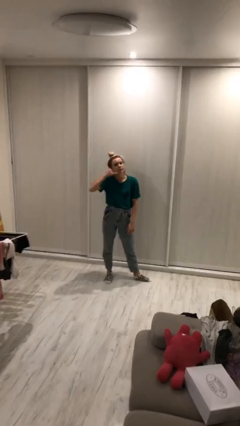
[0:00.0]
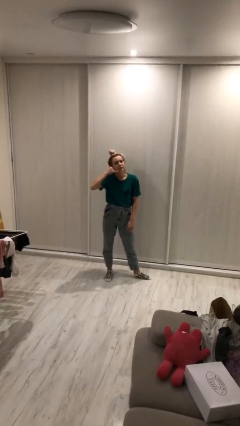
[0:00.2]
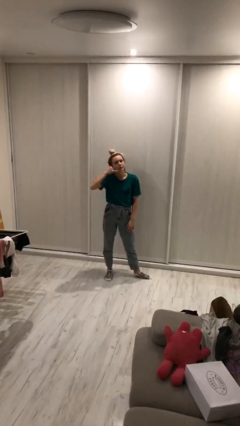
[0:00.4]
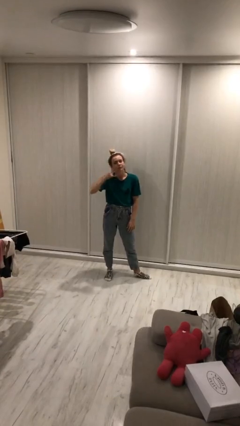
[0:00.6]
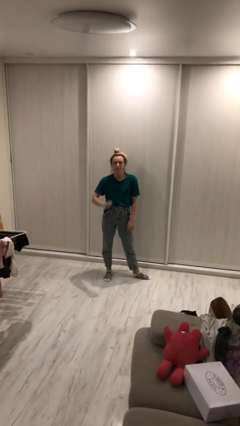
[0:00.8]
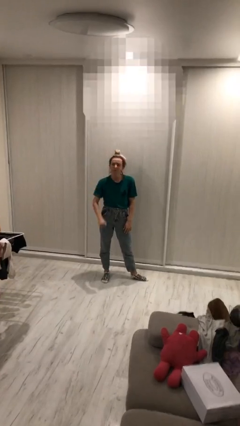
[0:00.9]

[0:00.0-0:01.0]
person gestures call me

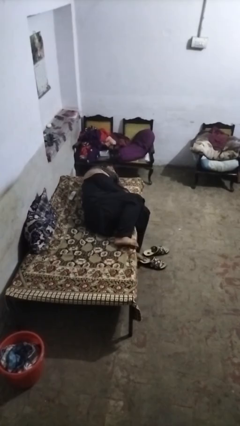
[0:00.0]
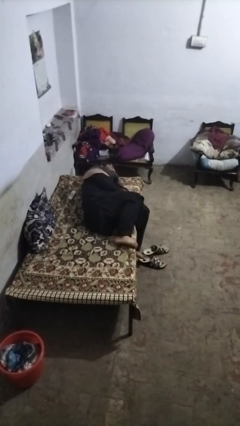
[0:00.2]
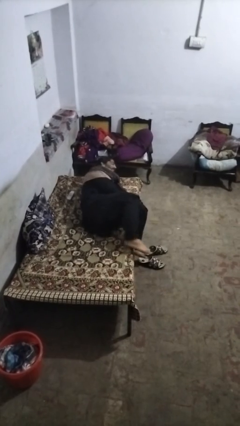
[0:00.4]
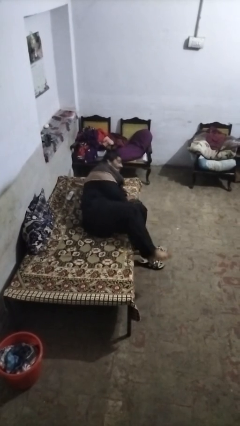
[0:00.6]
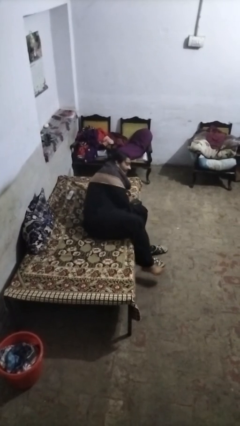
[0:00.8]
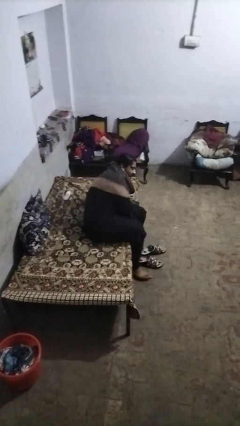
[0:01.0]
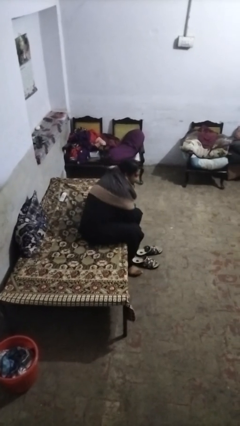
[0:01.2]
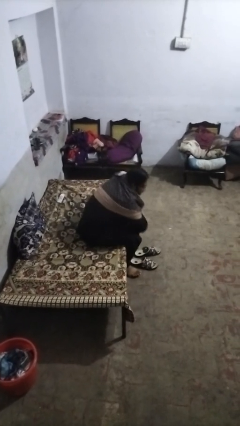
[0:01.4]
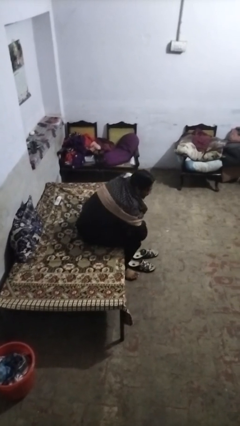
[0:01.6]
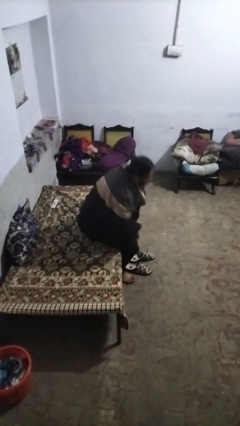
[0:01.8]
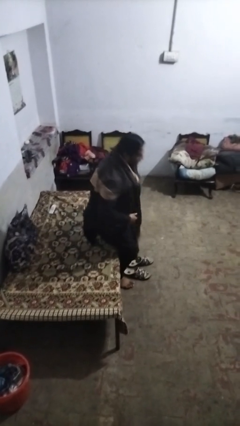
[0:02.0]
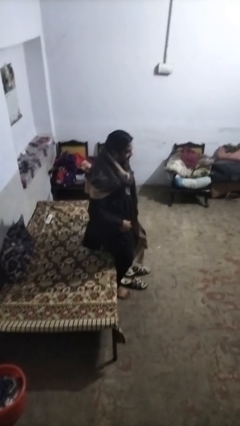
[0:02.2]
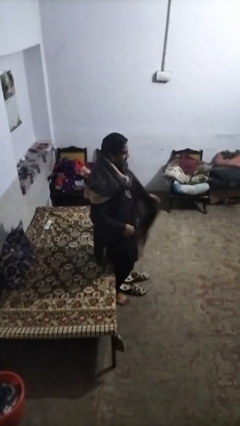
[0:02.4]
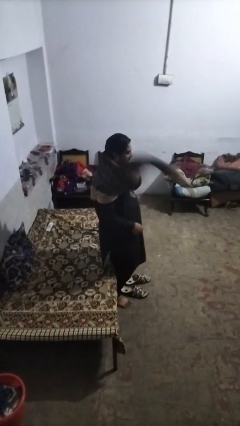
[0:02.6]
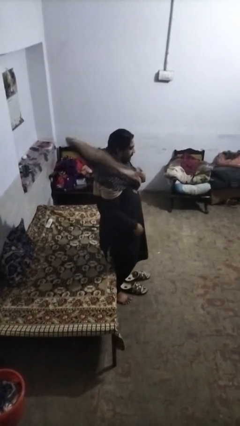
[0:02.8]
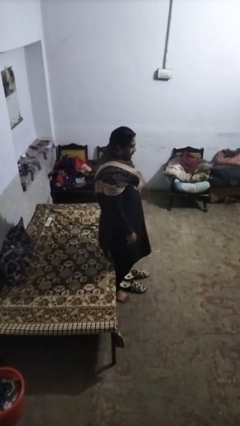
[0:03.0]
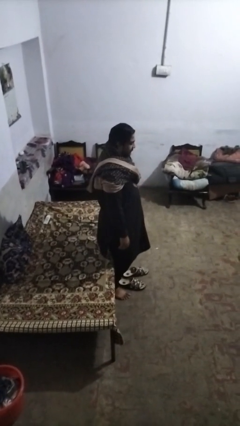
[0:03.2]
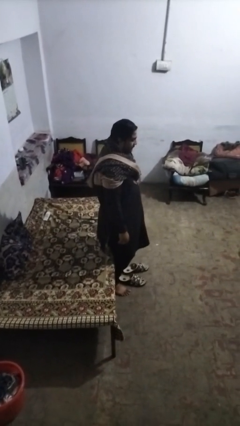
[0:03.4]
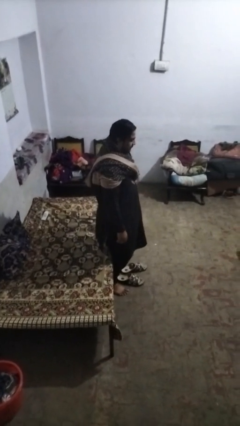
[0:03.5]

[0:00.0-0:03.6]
person stands up

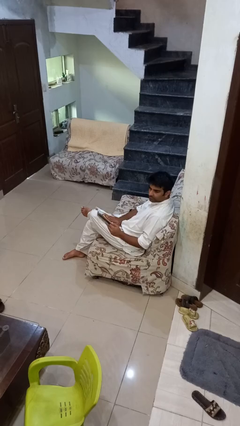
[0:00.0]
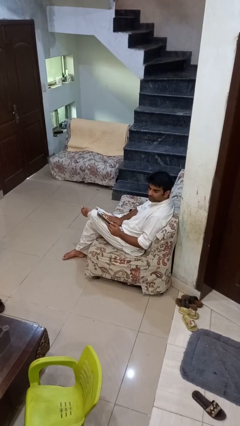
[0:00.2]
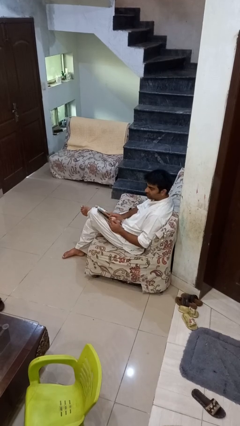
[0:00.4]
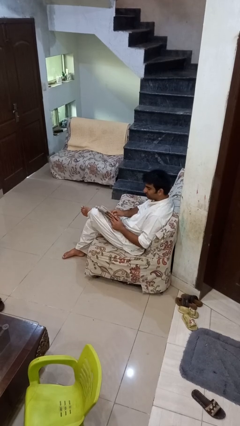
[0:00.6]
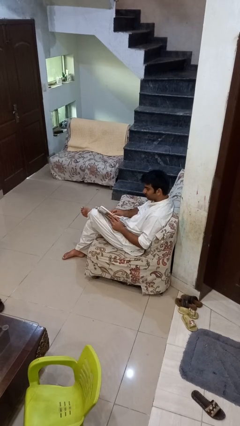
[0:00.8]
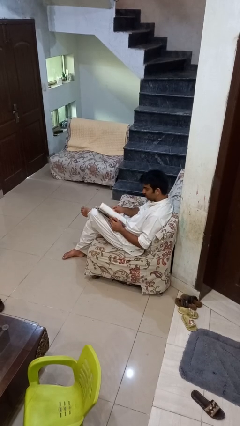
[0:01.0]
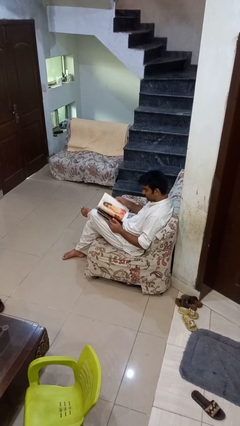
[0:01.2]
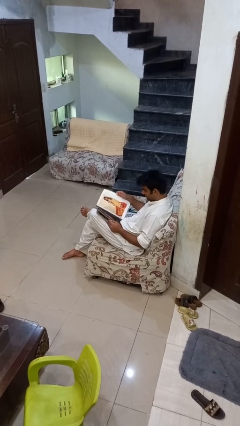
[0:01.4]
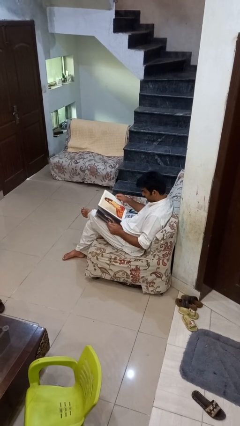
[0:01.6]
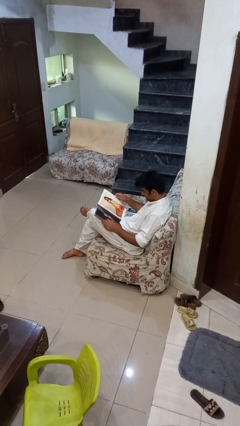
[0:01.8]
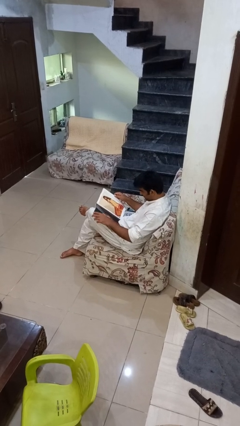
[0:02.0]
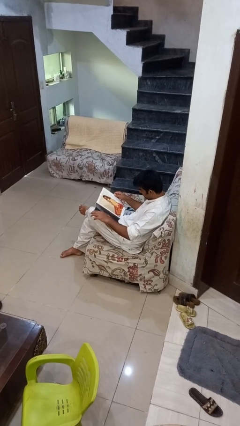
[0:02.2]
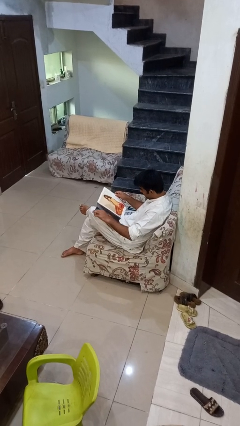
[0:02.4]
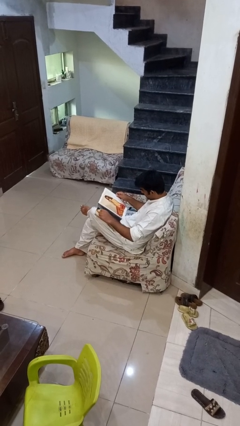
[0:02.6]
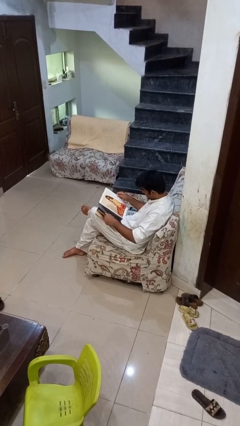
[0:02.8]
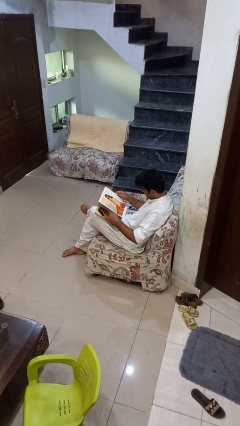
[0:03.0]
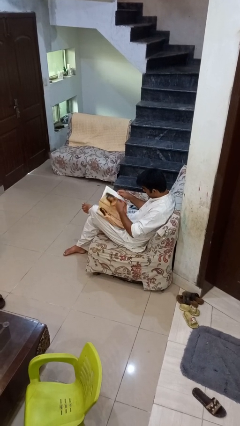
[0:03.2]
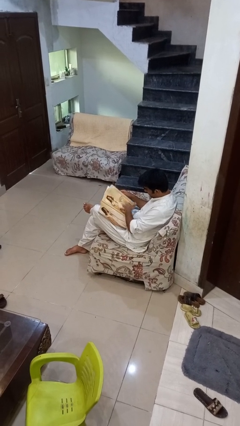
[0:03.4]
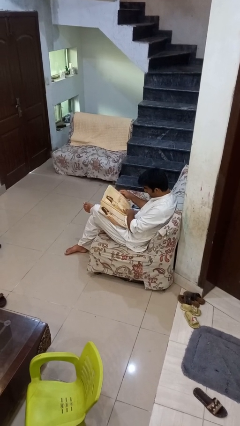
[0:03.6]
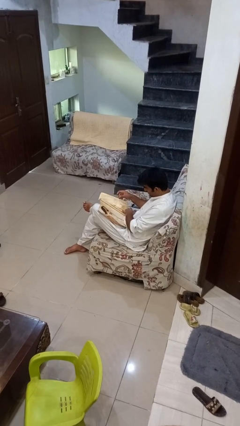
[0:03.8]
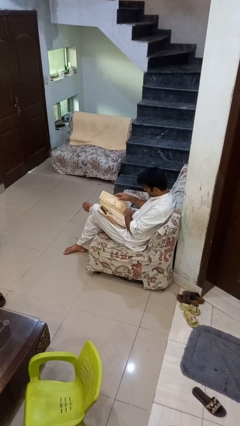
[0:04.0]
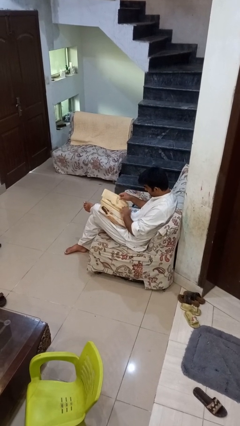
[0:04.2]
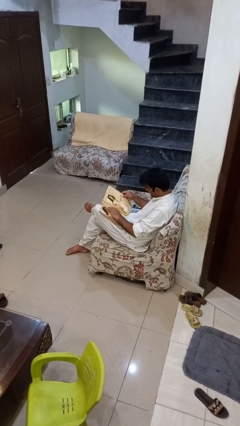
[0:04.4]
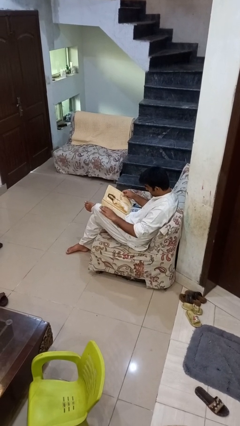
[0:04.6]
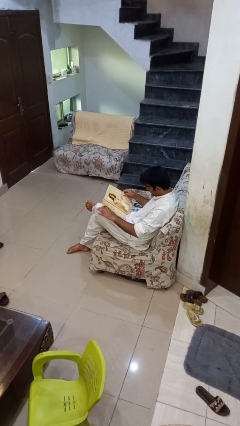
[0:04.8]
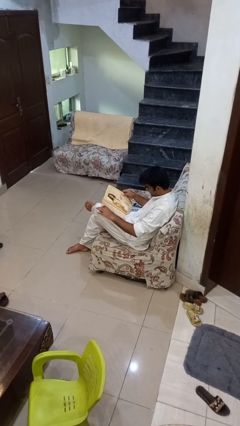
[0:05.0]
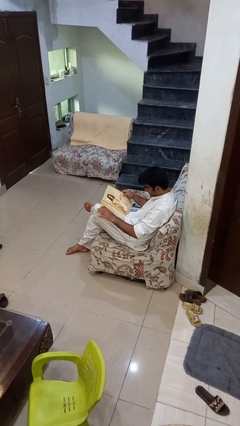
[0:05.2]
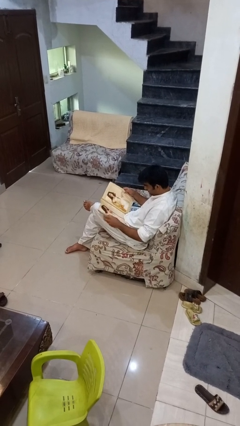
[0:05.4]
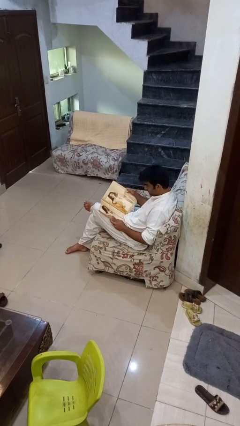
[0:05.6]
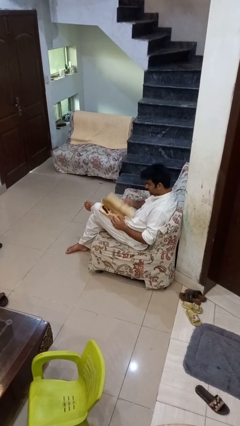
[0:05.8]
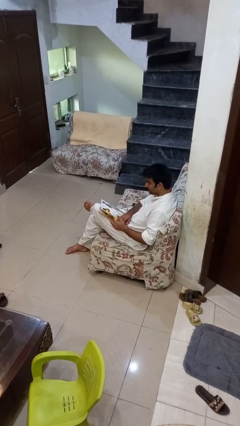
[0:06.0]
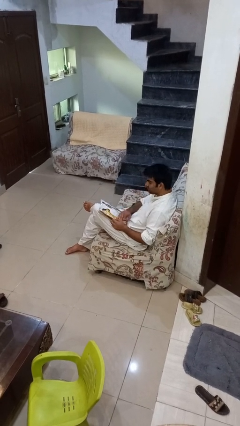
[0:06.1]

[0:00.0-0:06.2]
person reads magazine

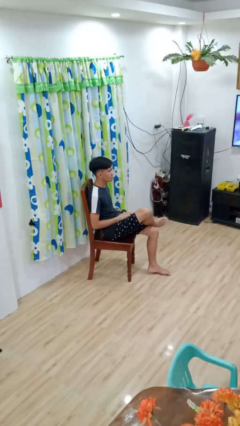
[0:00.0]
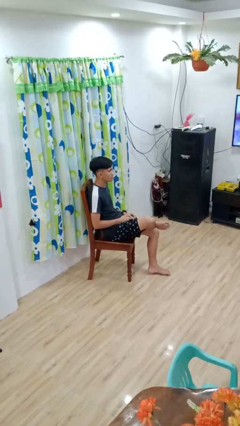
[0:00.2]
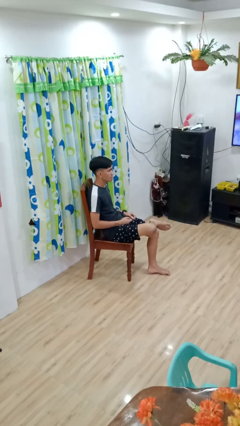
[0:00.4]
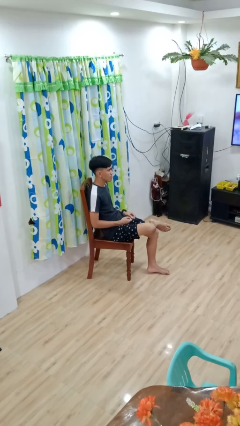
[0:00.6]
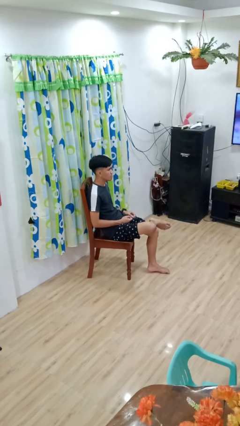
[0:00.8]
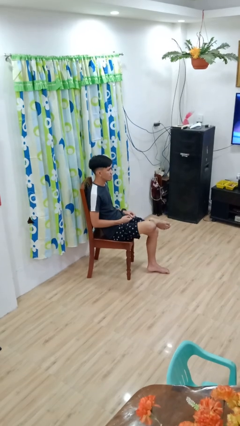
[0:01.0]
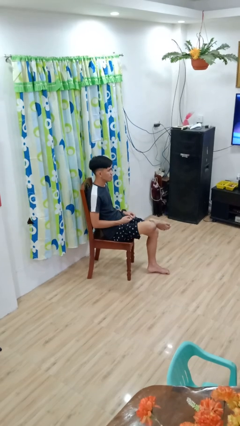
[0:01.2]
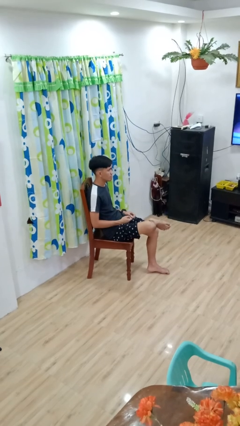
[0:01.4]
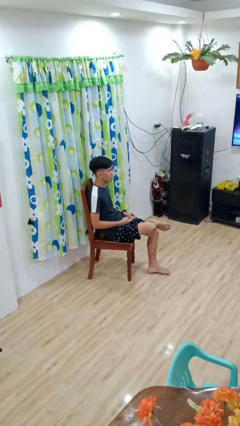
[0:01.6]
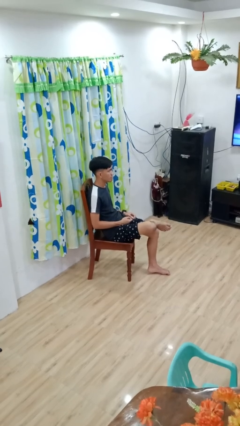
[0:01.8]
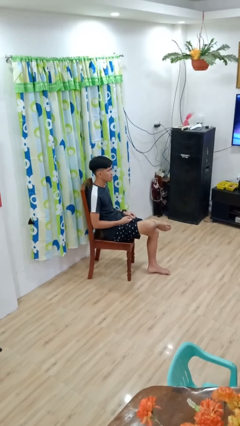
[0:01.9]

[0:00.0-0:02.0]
person crosses legs

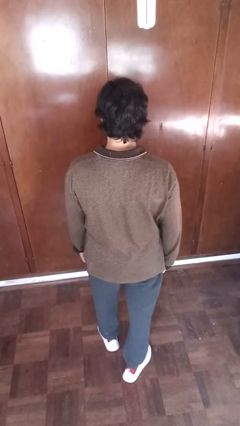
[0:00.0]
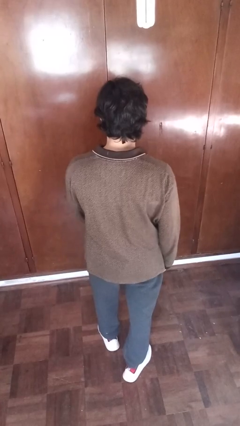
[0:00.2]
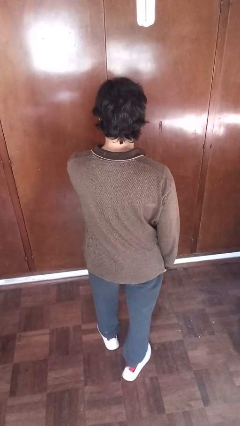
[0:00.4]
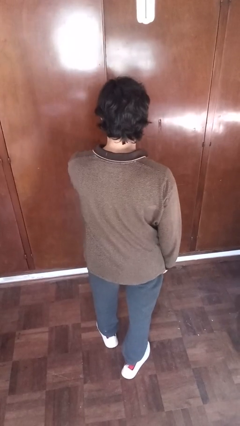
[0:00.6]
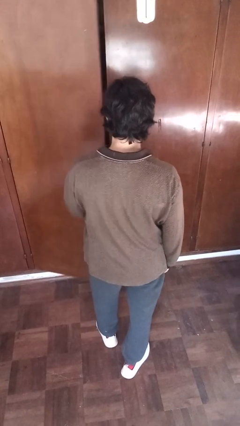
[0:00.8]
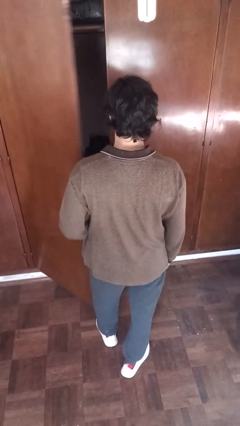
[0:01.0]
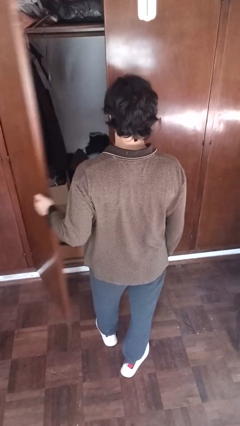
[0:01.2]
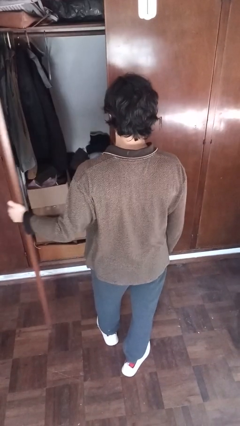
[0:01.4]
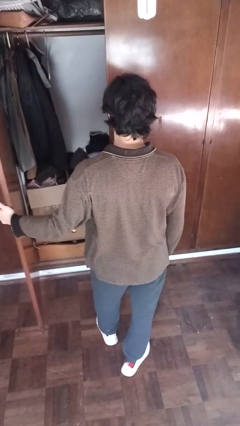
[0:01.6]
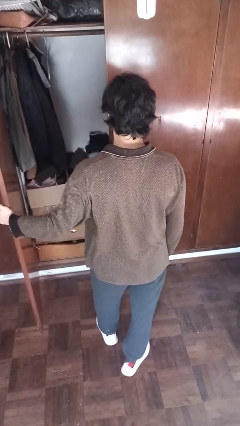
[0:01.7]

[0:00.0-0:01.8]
person opens closet door

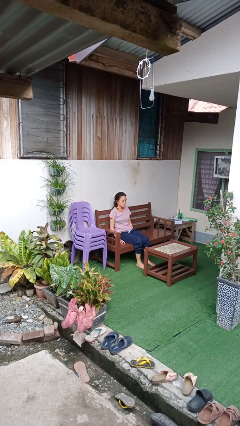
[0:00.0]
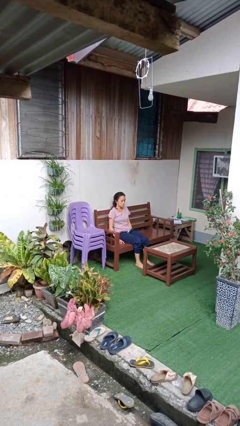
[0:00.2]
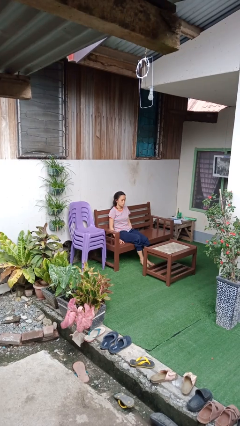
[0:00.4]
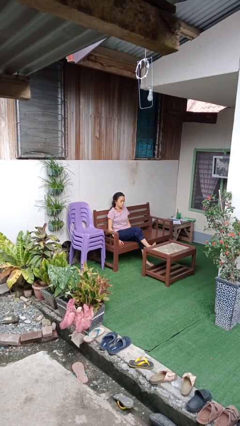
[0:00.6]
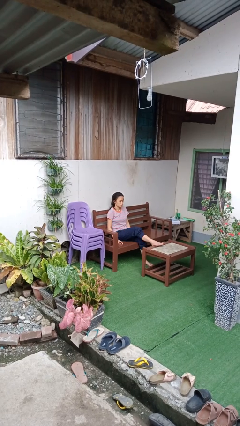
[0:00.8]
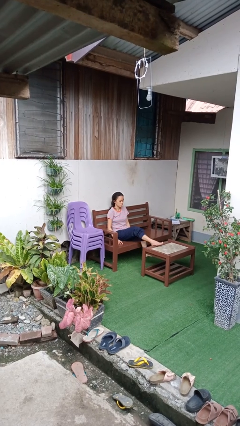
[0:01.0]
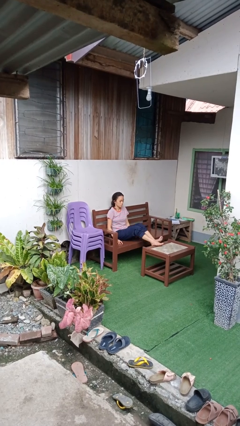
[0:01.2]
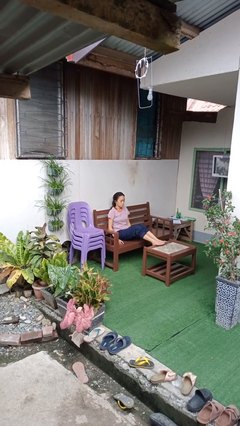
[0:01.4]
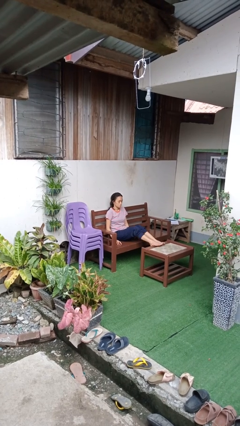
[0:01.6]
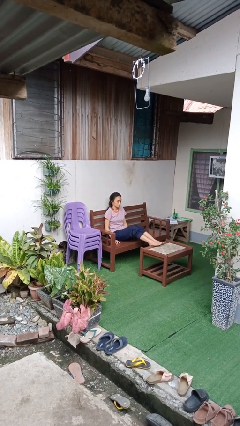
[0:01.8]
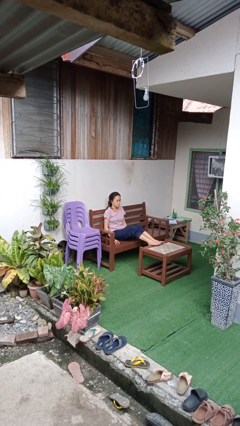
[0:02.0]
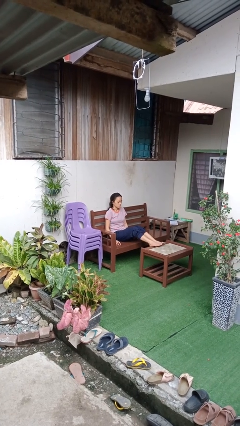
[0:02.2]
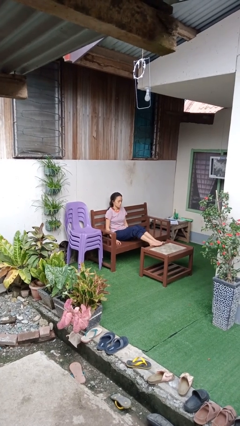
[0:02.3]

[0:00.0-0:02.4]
person puts feet up

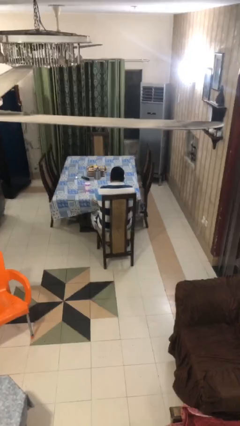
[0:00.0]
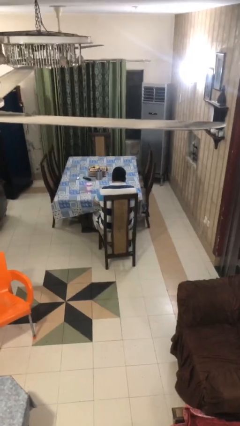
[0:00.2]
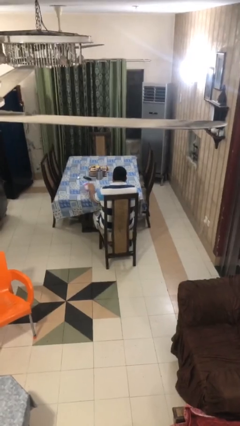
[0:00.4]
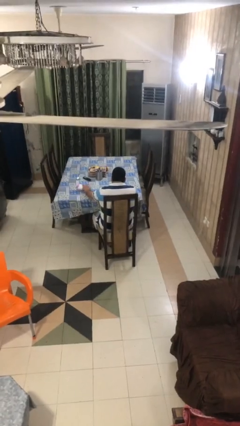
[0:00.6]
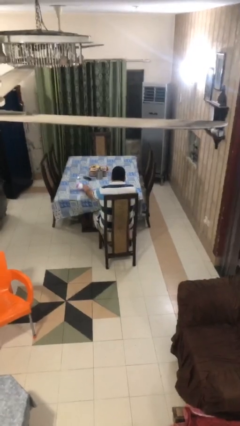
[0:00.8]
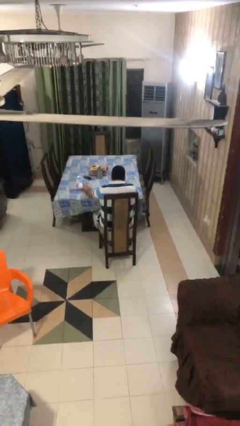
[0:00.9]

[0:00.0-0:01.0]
person knocks over glass
